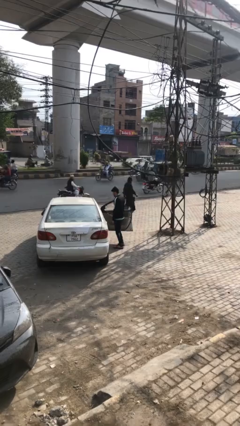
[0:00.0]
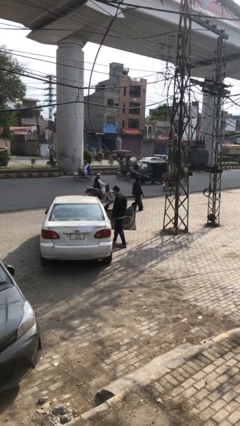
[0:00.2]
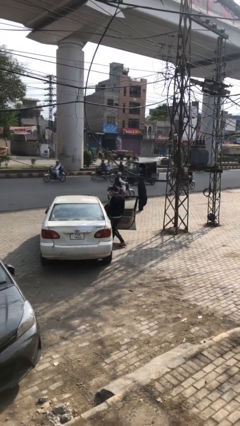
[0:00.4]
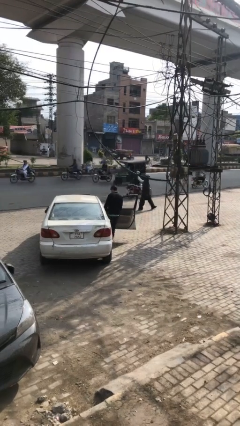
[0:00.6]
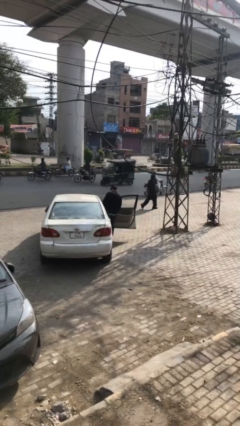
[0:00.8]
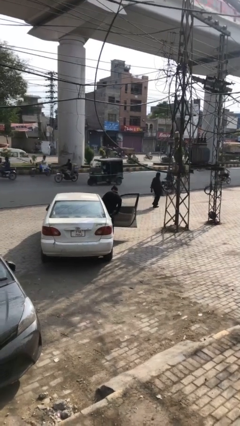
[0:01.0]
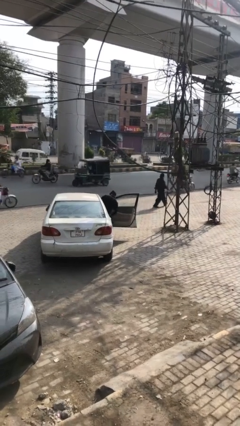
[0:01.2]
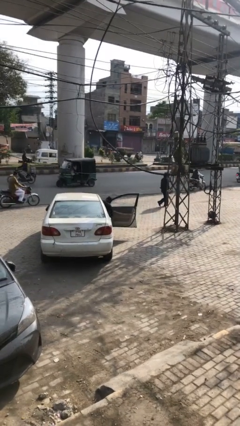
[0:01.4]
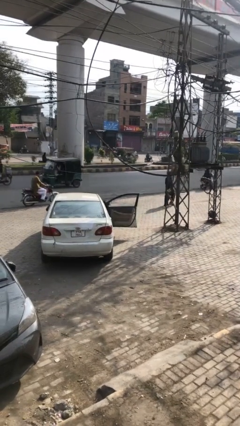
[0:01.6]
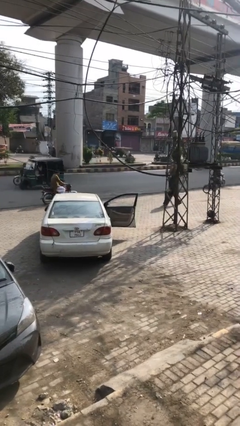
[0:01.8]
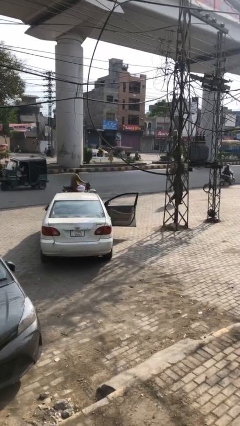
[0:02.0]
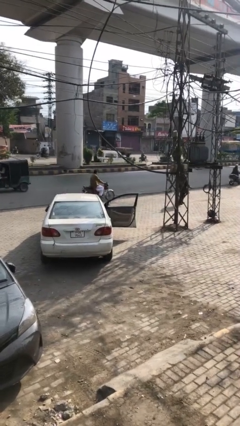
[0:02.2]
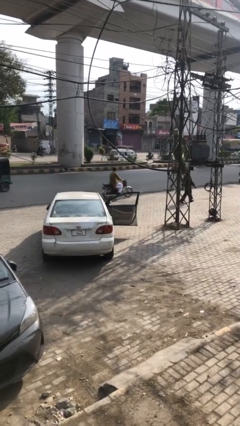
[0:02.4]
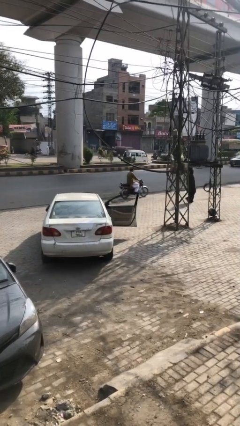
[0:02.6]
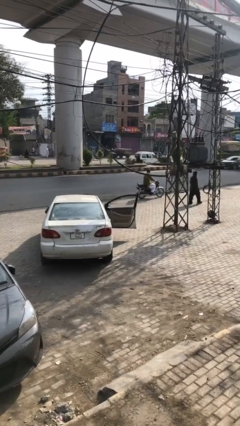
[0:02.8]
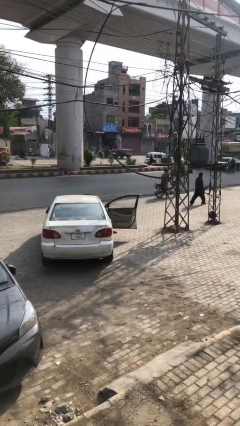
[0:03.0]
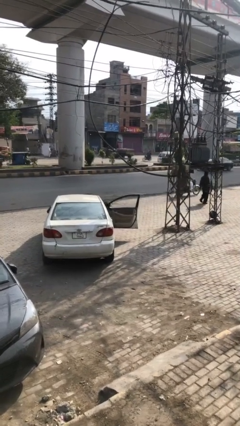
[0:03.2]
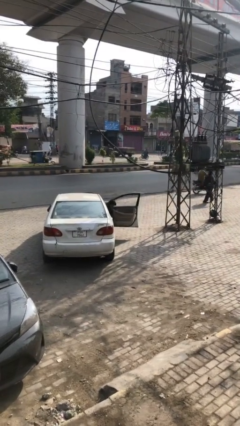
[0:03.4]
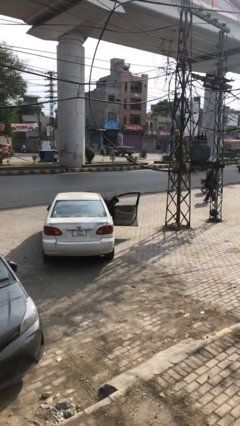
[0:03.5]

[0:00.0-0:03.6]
person enters car

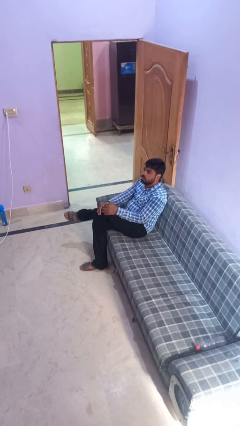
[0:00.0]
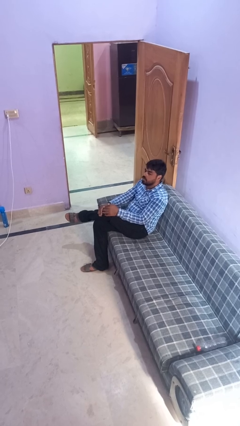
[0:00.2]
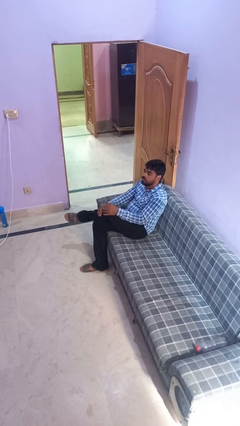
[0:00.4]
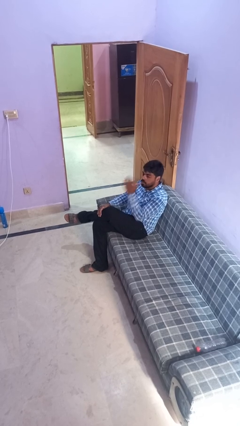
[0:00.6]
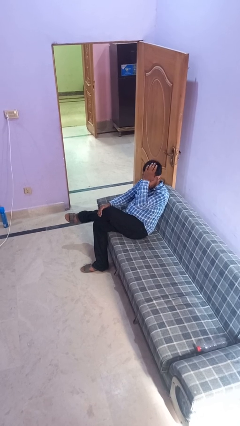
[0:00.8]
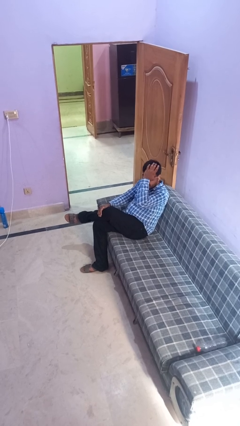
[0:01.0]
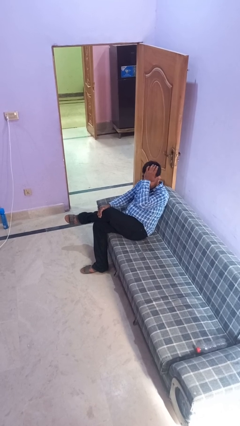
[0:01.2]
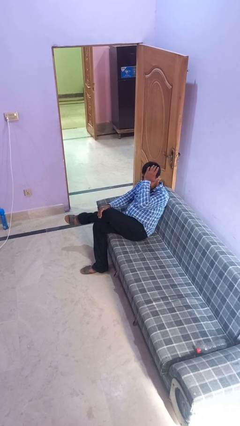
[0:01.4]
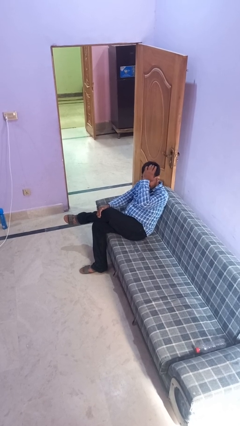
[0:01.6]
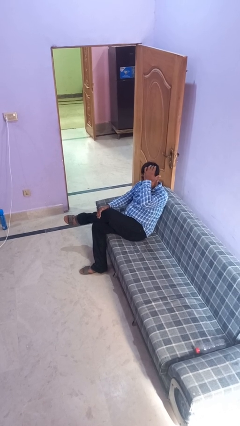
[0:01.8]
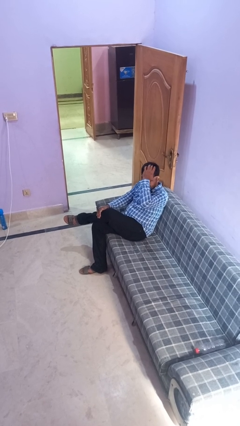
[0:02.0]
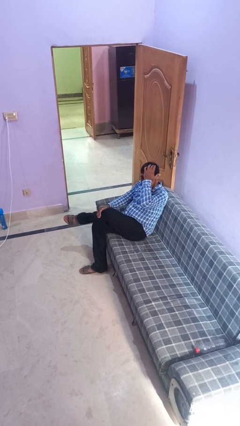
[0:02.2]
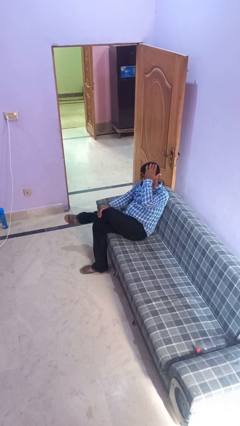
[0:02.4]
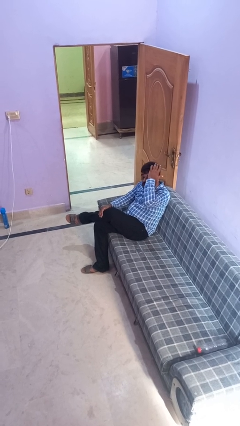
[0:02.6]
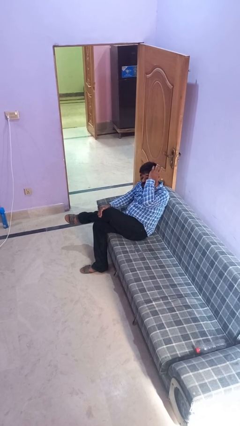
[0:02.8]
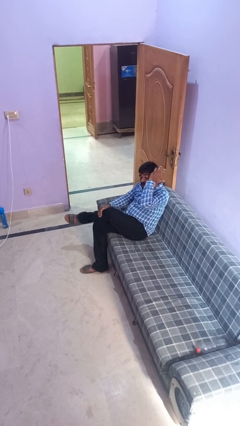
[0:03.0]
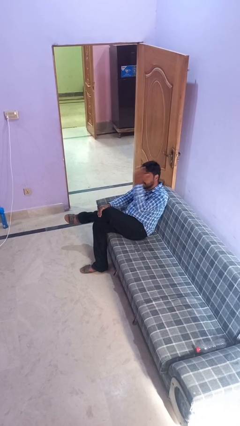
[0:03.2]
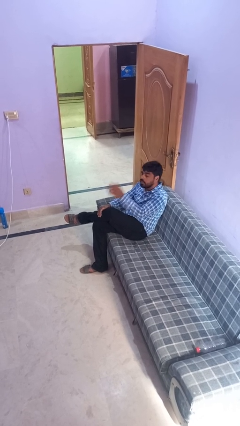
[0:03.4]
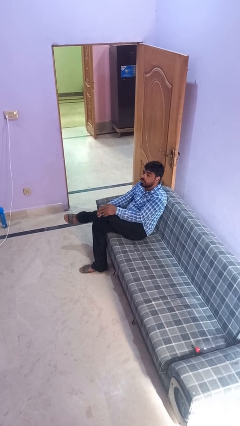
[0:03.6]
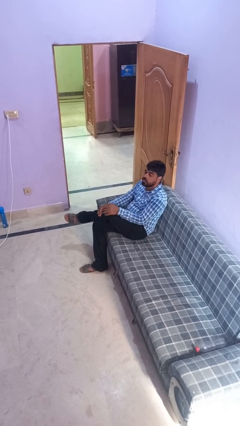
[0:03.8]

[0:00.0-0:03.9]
person rubs eyes

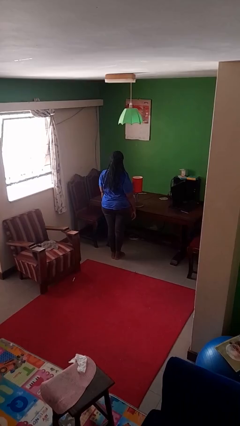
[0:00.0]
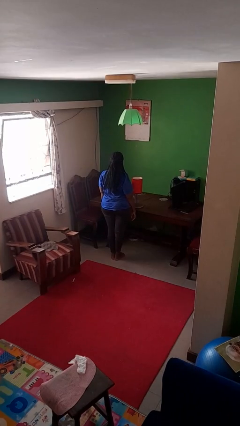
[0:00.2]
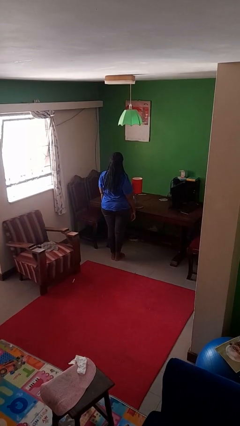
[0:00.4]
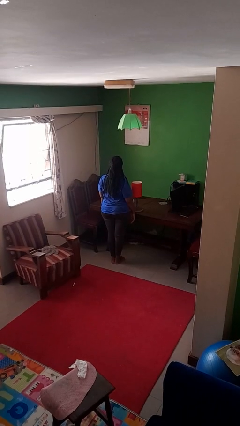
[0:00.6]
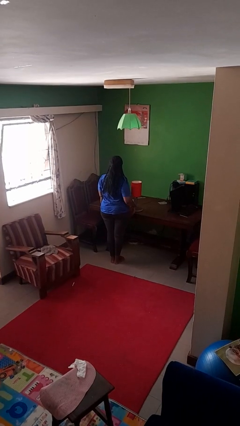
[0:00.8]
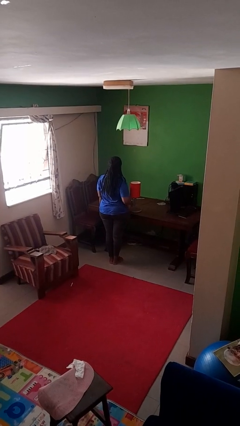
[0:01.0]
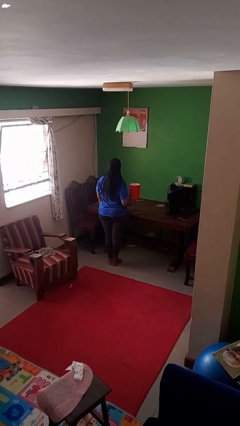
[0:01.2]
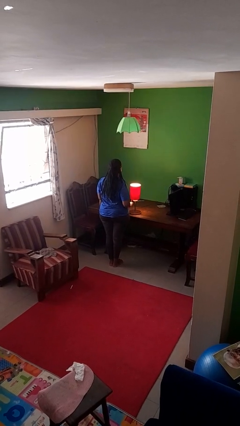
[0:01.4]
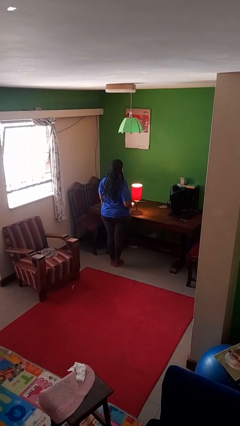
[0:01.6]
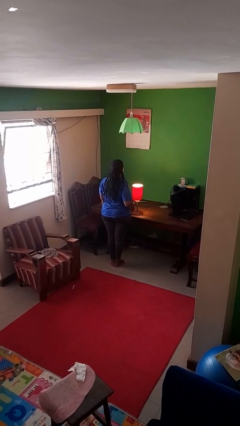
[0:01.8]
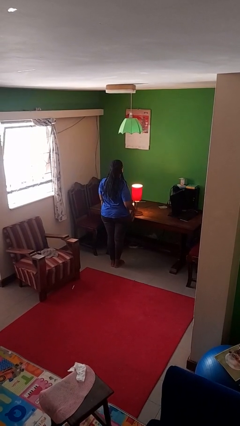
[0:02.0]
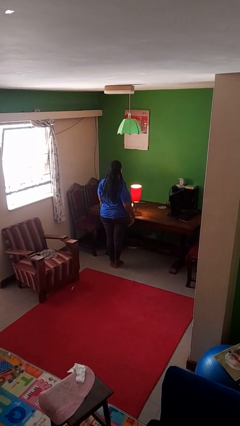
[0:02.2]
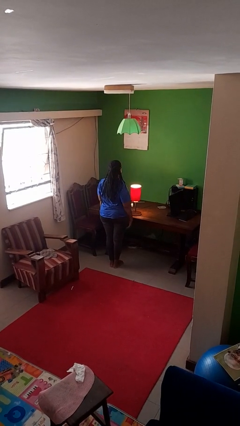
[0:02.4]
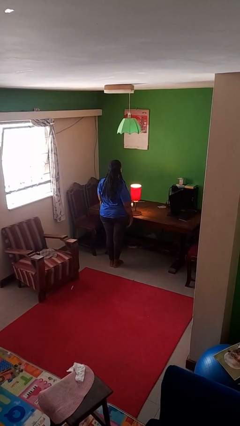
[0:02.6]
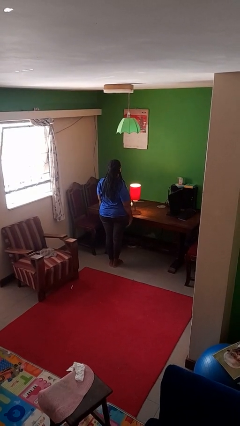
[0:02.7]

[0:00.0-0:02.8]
person turns on lamp

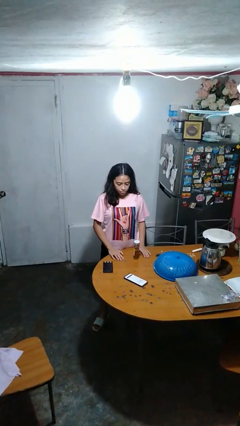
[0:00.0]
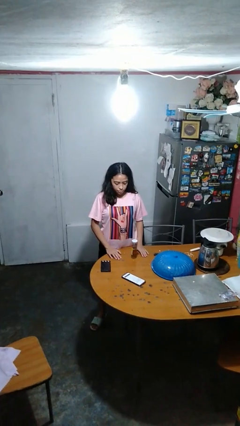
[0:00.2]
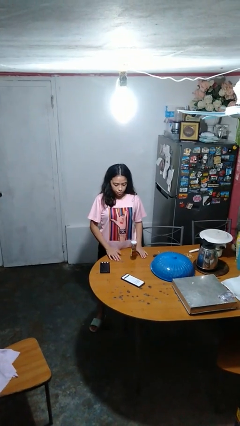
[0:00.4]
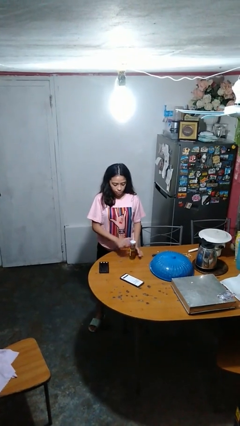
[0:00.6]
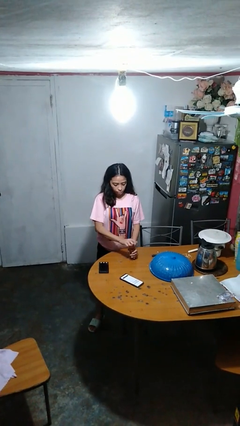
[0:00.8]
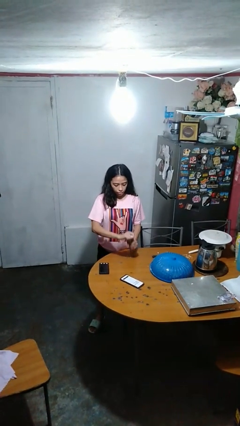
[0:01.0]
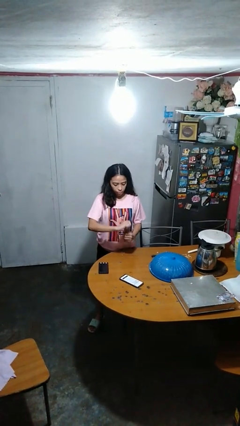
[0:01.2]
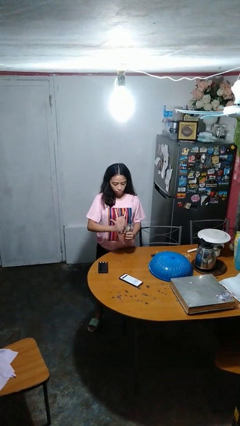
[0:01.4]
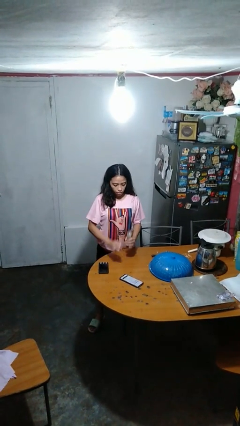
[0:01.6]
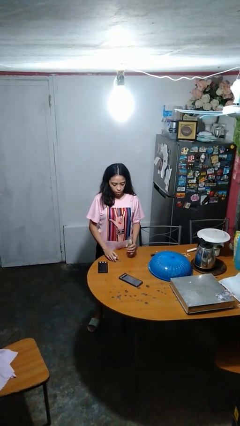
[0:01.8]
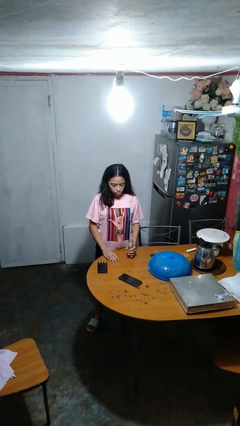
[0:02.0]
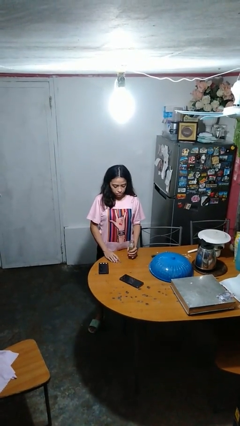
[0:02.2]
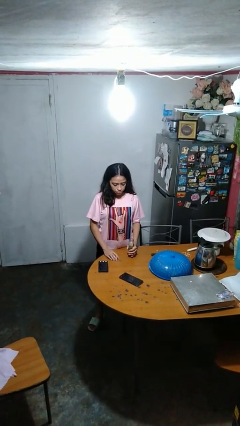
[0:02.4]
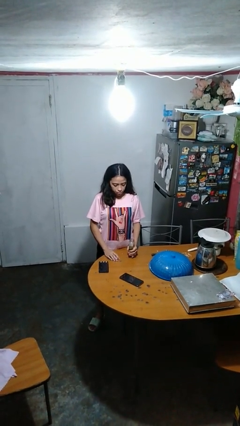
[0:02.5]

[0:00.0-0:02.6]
person opens jar

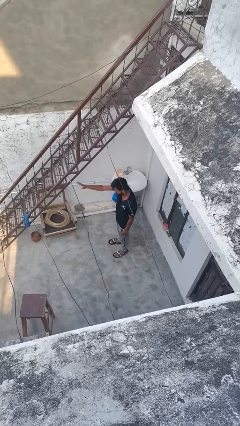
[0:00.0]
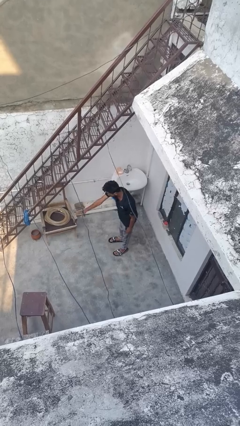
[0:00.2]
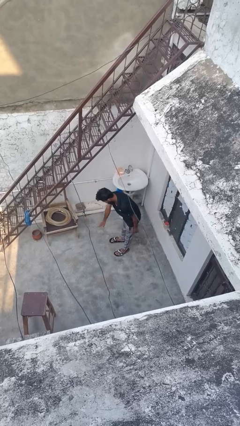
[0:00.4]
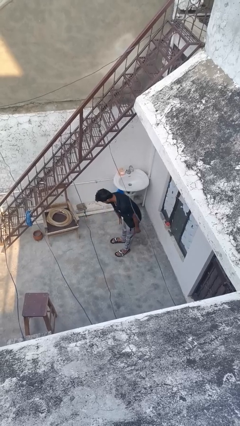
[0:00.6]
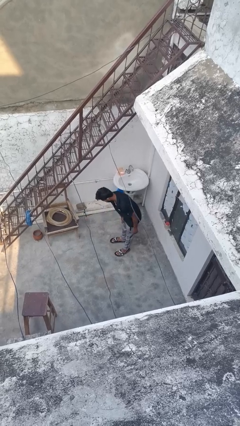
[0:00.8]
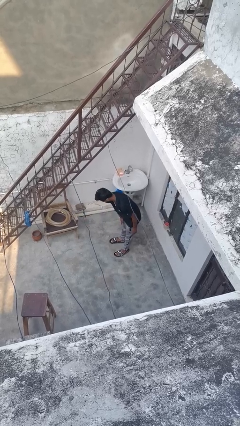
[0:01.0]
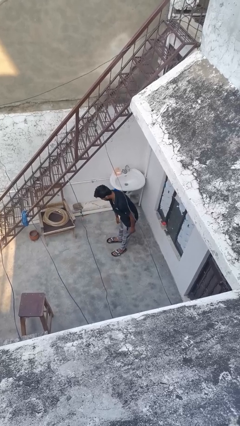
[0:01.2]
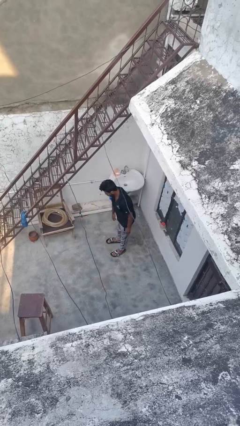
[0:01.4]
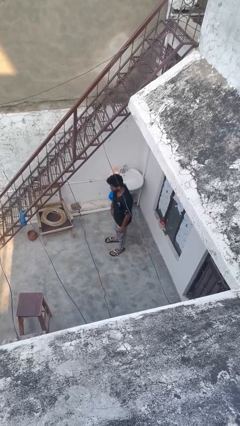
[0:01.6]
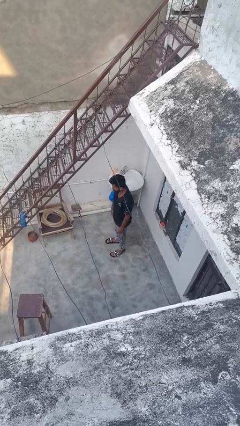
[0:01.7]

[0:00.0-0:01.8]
person gestures swipe down

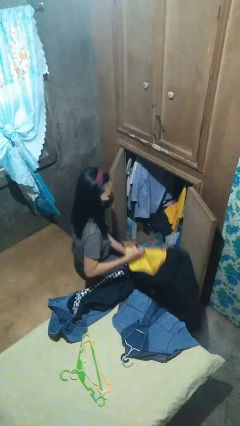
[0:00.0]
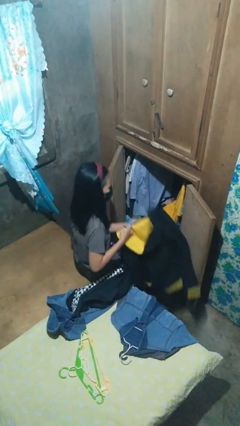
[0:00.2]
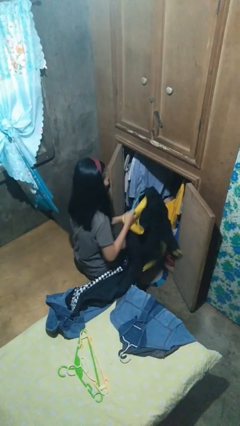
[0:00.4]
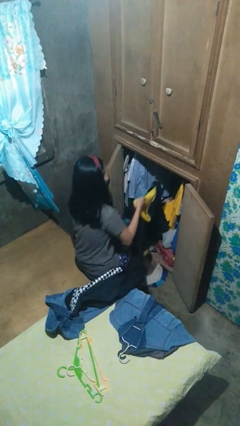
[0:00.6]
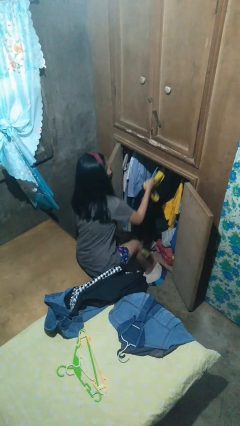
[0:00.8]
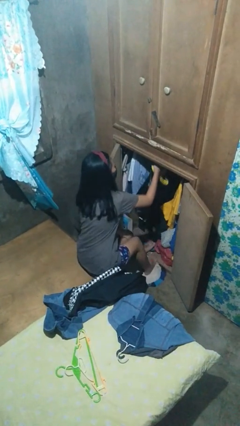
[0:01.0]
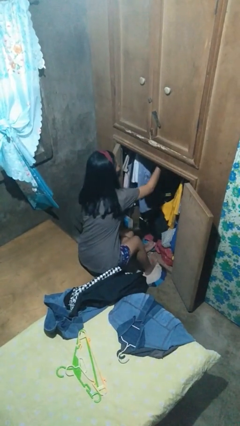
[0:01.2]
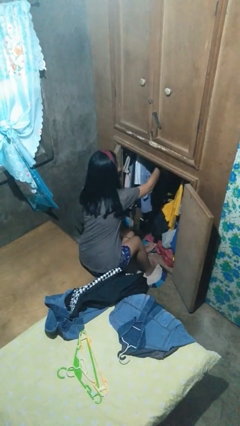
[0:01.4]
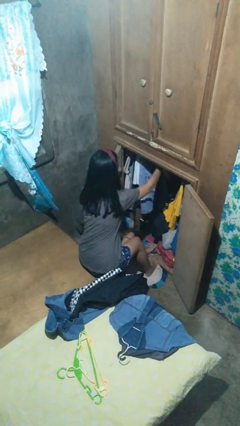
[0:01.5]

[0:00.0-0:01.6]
person puts clothes into closet

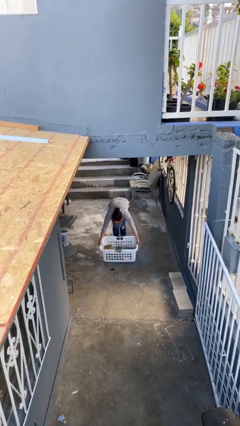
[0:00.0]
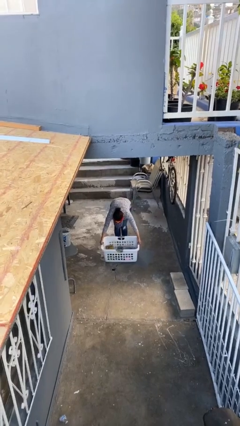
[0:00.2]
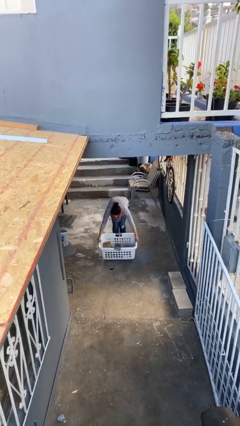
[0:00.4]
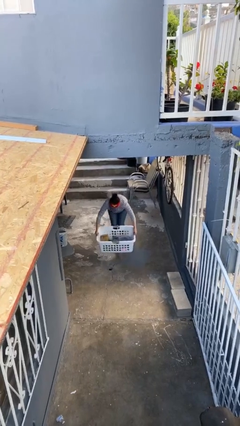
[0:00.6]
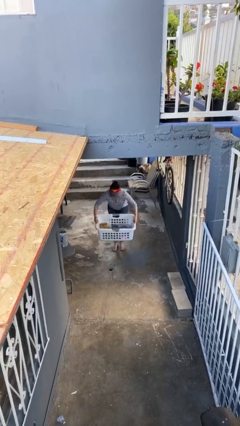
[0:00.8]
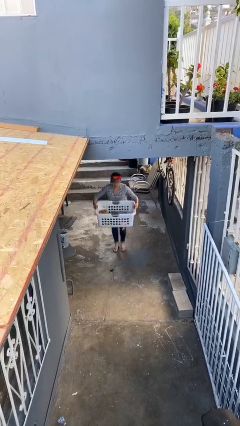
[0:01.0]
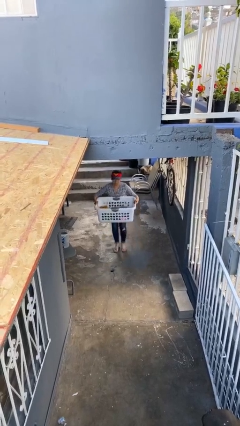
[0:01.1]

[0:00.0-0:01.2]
person picks up object from floor
